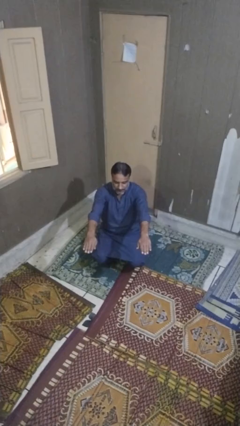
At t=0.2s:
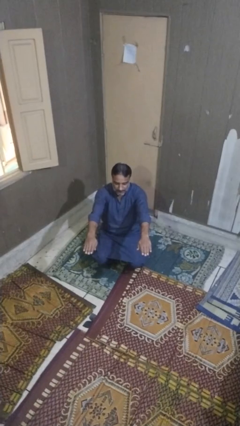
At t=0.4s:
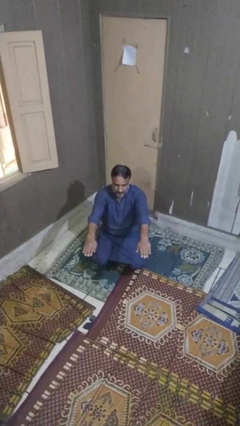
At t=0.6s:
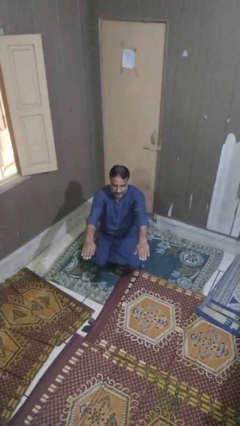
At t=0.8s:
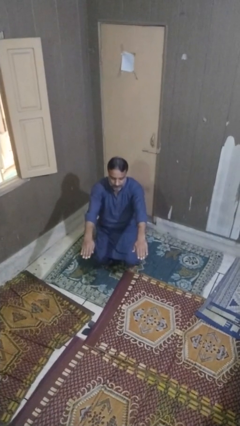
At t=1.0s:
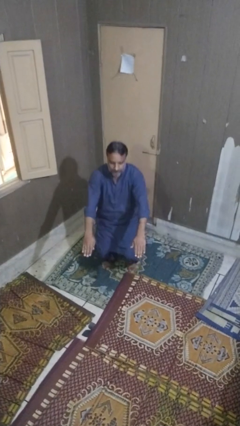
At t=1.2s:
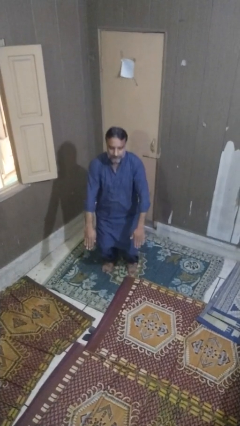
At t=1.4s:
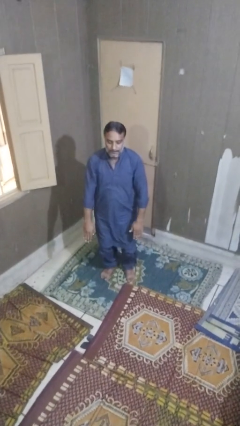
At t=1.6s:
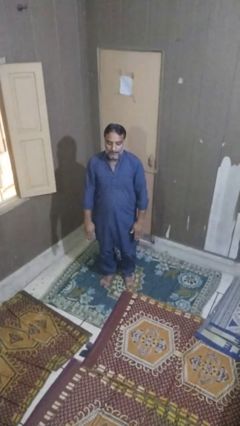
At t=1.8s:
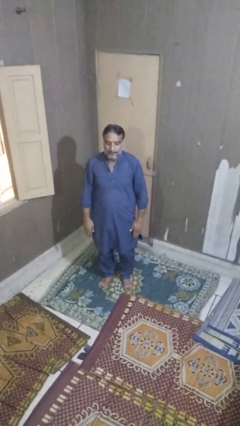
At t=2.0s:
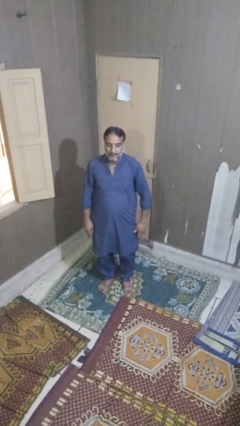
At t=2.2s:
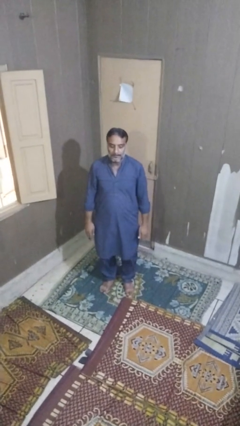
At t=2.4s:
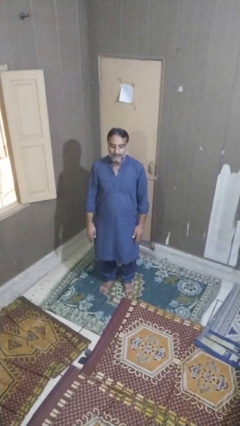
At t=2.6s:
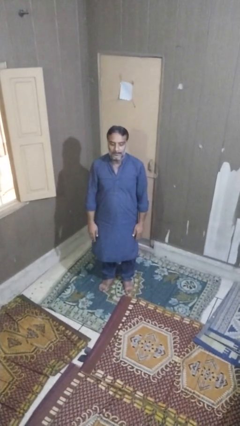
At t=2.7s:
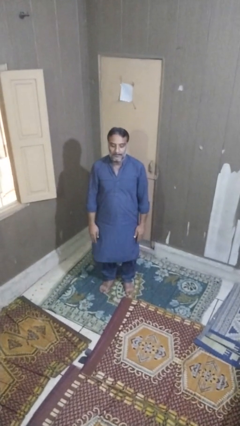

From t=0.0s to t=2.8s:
person stands up

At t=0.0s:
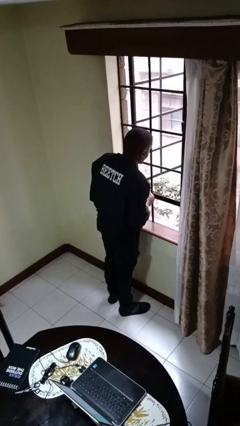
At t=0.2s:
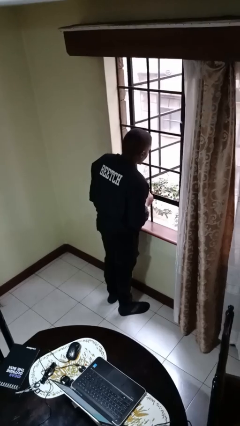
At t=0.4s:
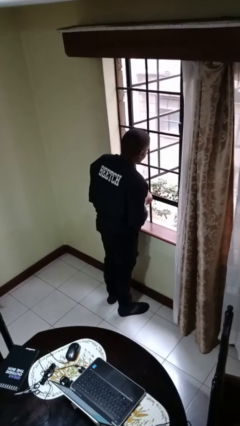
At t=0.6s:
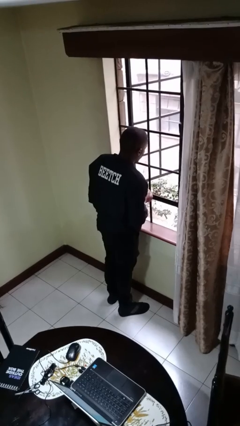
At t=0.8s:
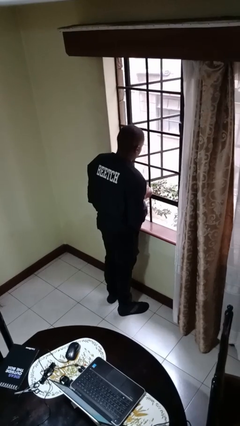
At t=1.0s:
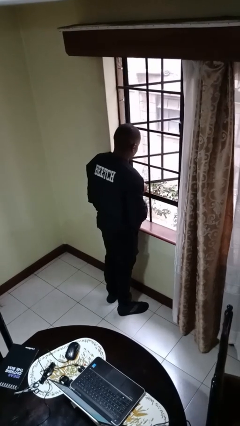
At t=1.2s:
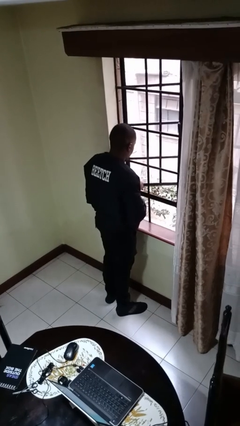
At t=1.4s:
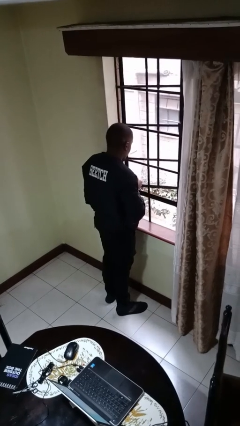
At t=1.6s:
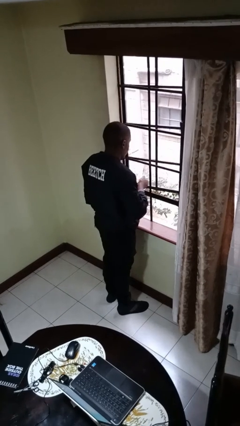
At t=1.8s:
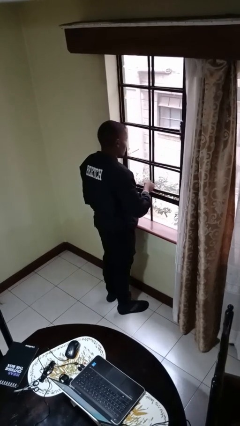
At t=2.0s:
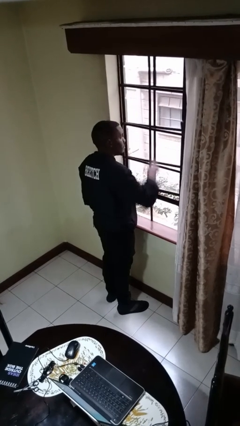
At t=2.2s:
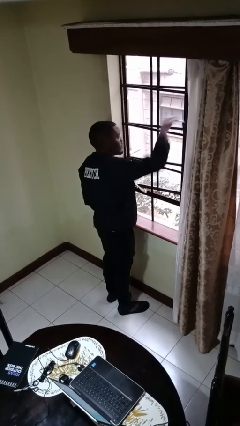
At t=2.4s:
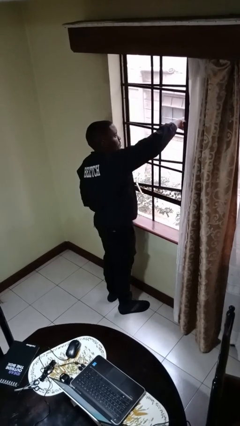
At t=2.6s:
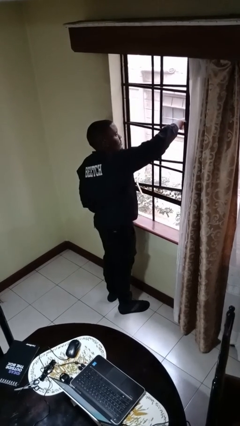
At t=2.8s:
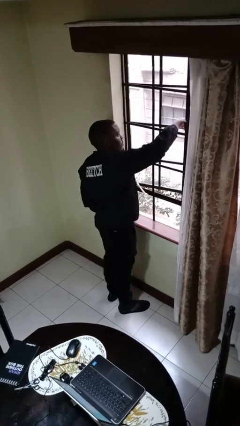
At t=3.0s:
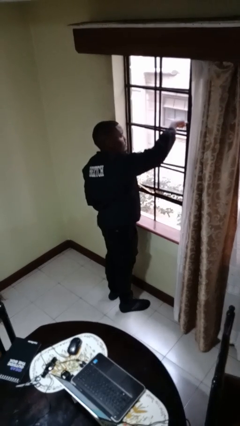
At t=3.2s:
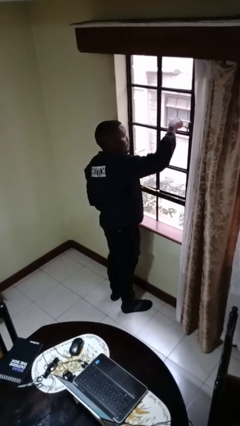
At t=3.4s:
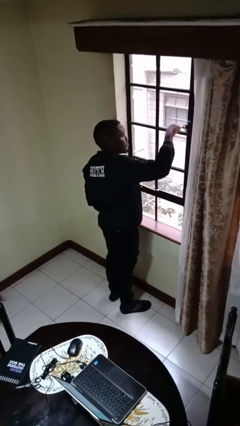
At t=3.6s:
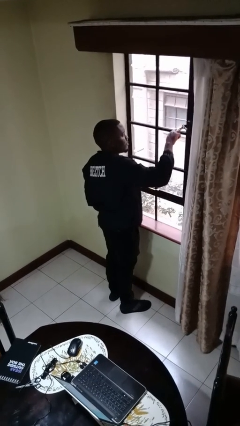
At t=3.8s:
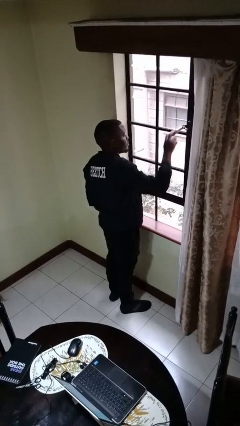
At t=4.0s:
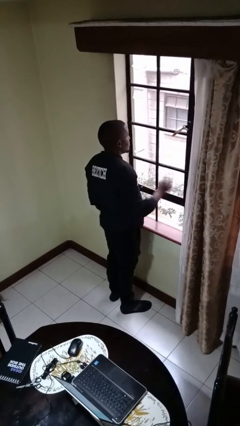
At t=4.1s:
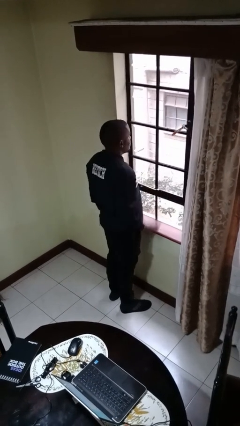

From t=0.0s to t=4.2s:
person closes home window

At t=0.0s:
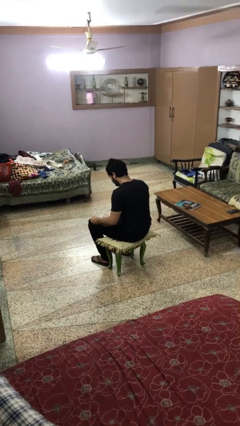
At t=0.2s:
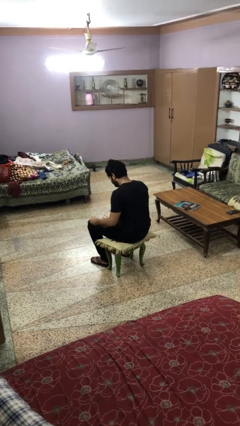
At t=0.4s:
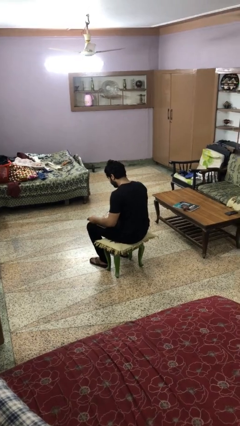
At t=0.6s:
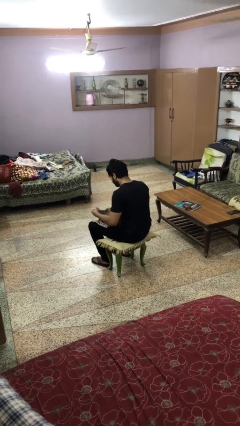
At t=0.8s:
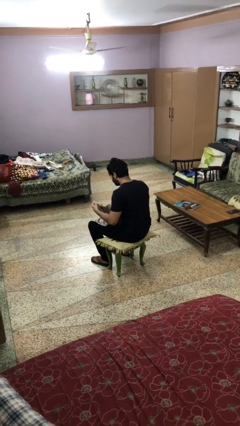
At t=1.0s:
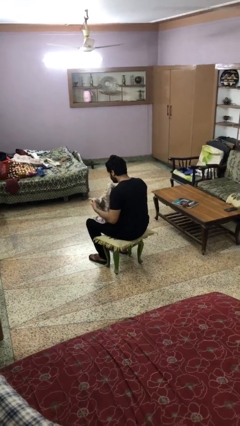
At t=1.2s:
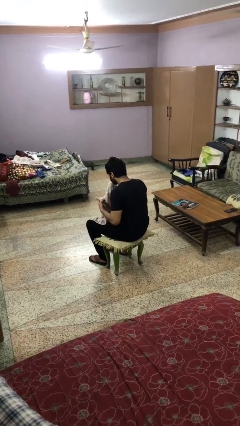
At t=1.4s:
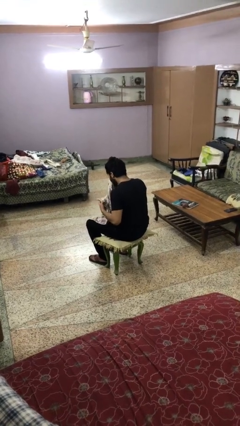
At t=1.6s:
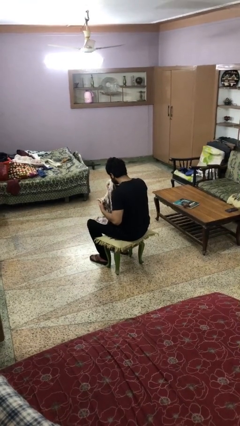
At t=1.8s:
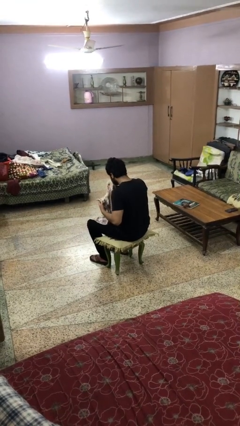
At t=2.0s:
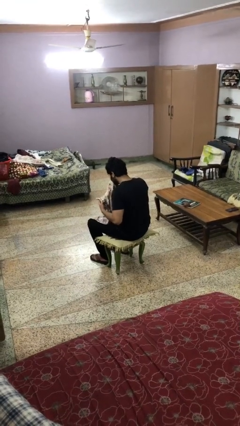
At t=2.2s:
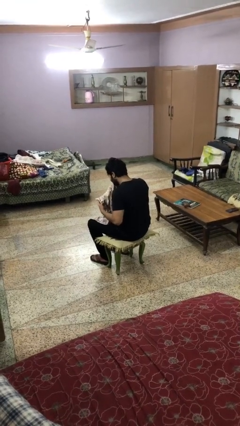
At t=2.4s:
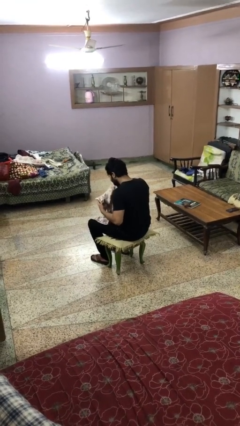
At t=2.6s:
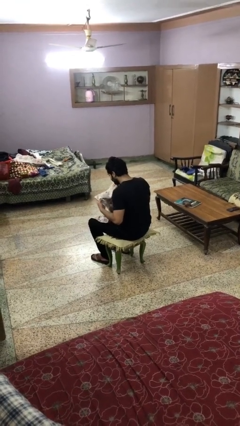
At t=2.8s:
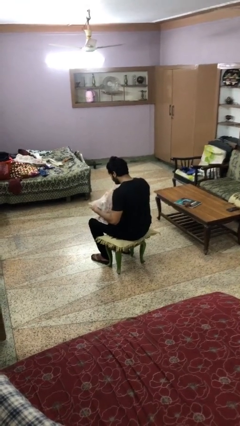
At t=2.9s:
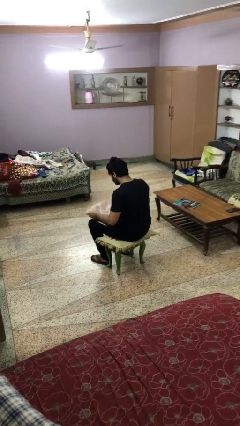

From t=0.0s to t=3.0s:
person wipes mouth with napkin

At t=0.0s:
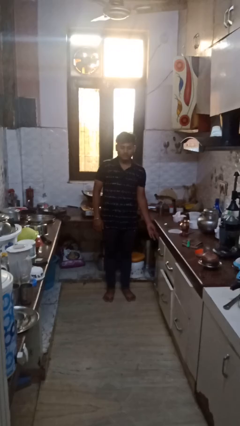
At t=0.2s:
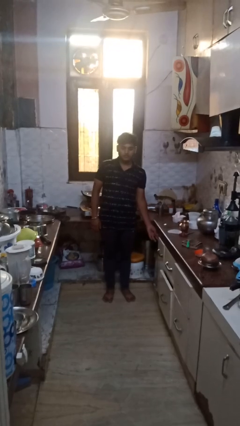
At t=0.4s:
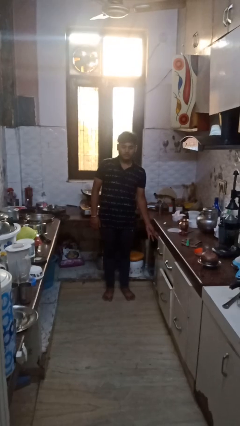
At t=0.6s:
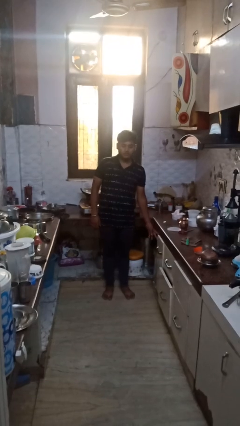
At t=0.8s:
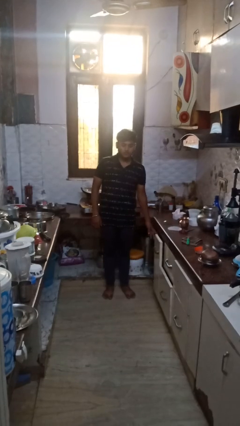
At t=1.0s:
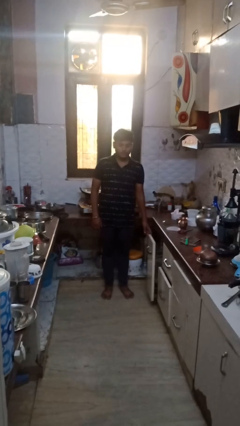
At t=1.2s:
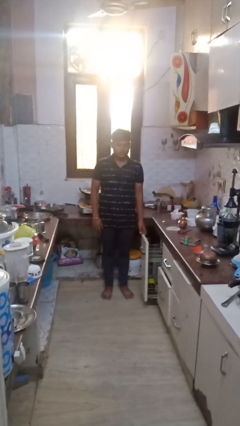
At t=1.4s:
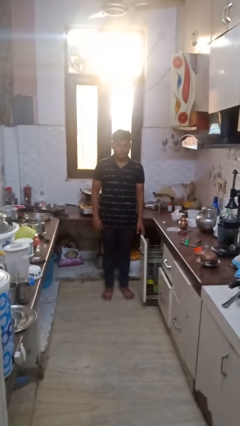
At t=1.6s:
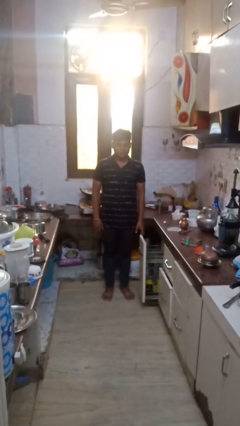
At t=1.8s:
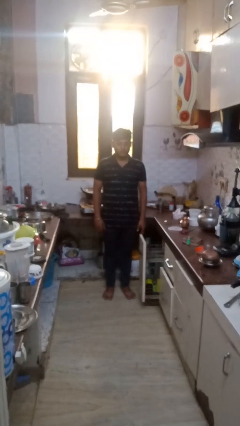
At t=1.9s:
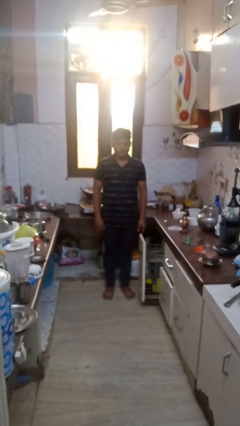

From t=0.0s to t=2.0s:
person opens dishwasher

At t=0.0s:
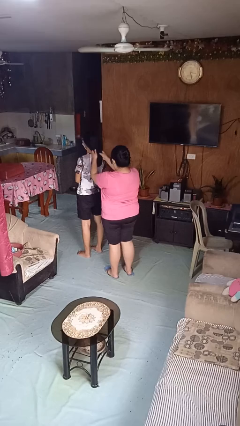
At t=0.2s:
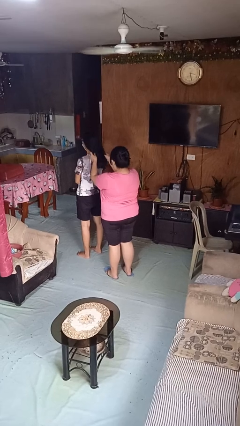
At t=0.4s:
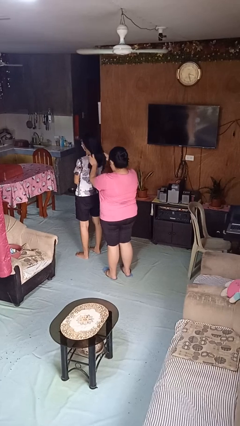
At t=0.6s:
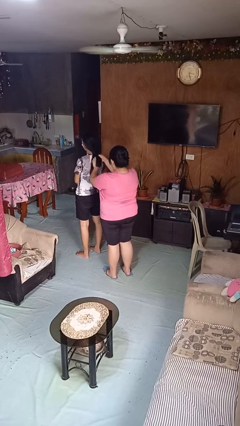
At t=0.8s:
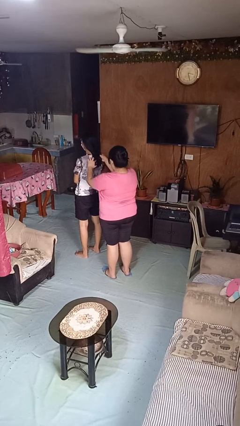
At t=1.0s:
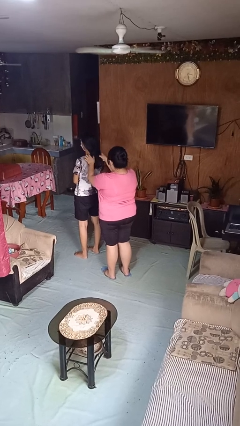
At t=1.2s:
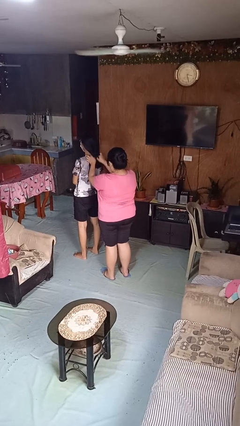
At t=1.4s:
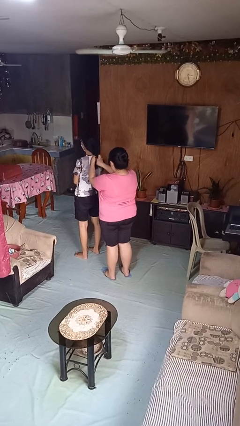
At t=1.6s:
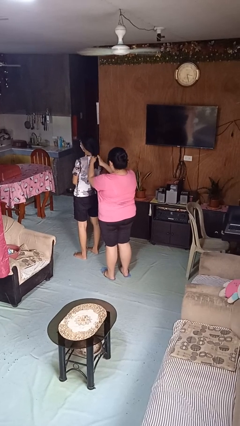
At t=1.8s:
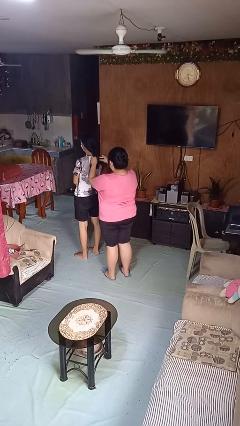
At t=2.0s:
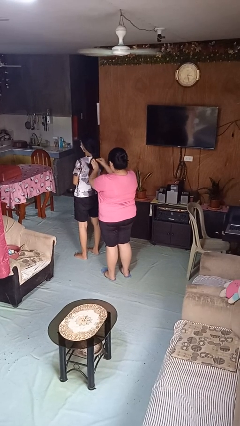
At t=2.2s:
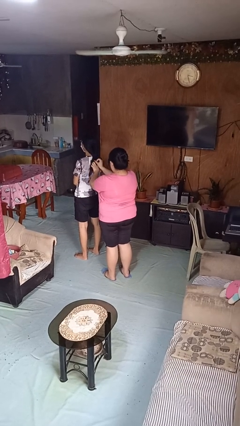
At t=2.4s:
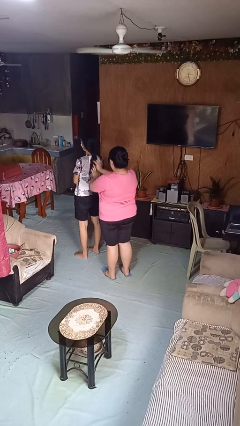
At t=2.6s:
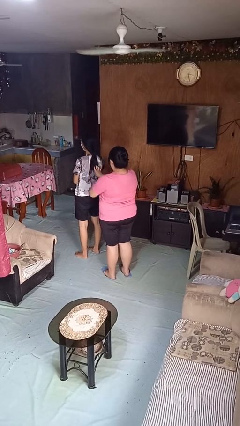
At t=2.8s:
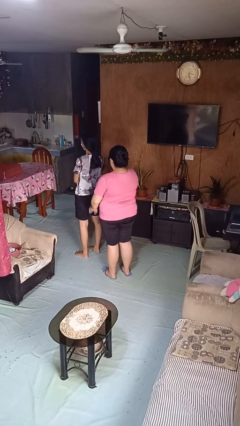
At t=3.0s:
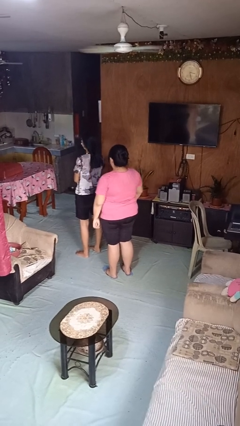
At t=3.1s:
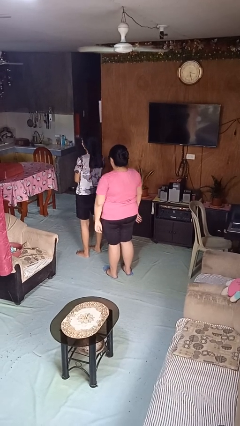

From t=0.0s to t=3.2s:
person braids hair of person

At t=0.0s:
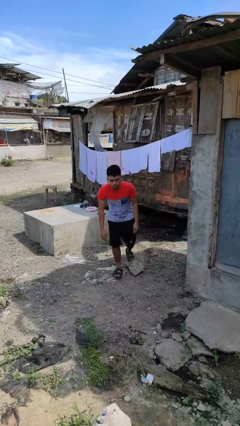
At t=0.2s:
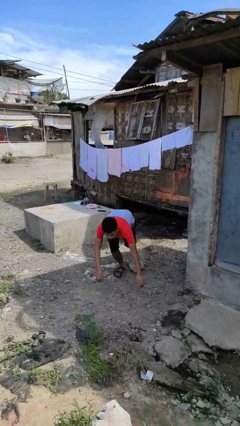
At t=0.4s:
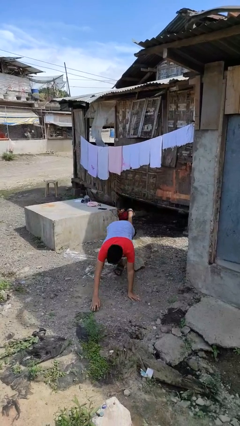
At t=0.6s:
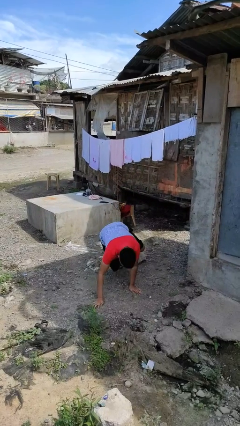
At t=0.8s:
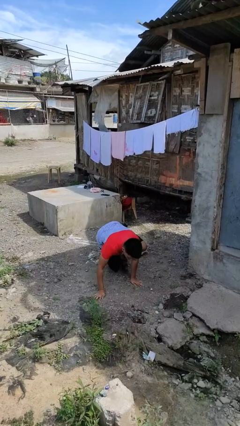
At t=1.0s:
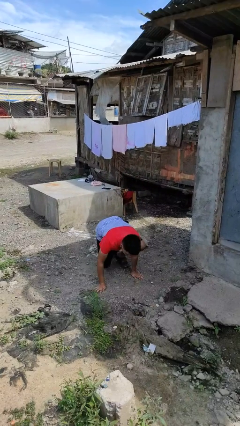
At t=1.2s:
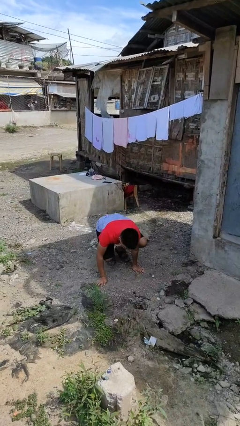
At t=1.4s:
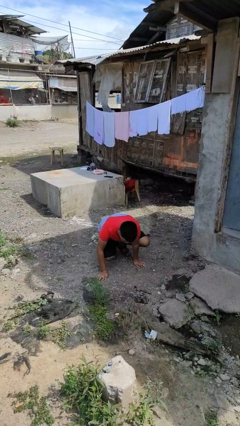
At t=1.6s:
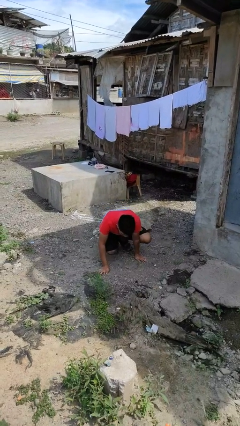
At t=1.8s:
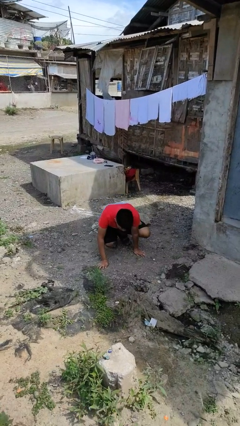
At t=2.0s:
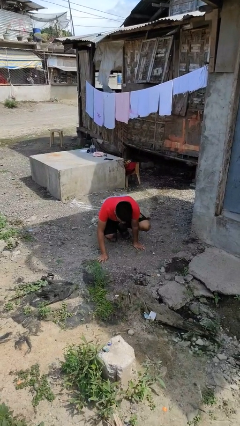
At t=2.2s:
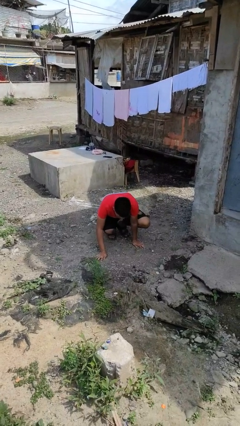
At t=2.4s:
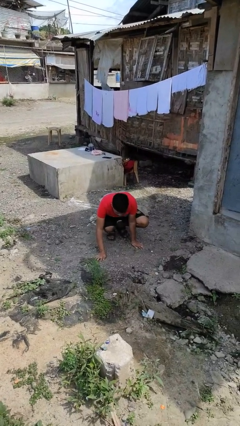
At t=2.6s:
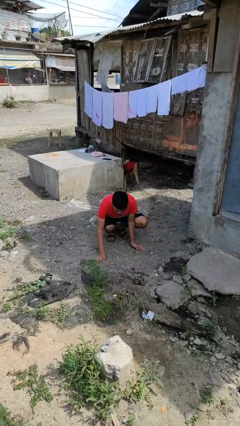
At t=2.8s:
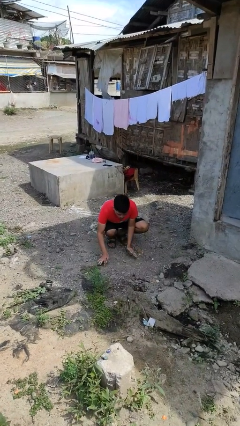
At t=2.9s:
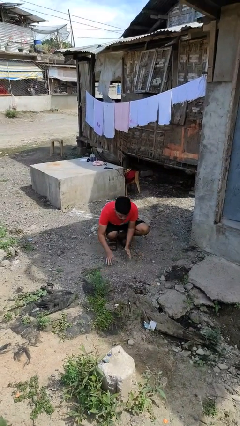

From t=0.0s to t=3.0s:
person trips on object on floor
